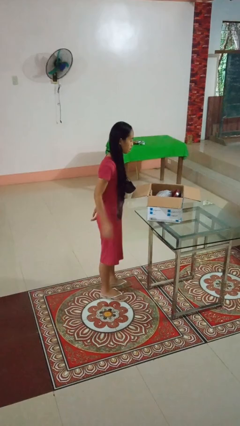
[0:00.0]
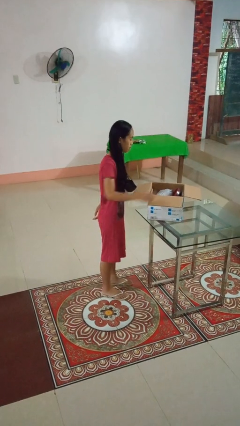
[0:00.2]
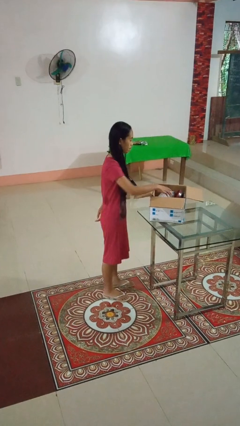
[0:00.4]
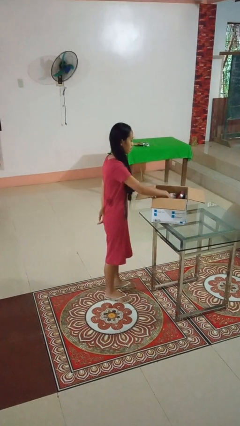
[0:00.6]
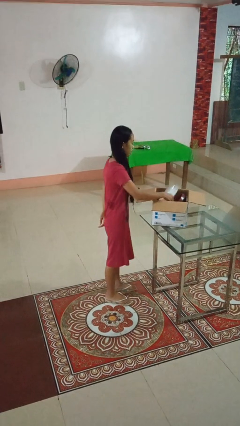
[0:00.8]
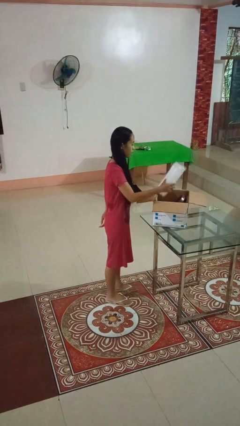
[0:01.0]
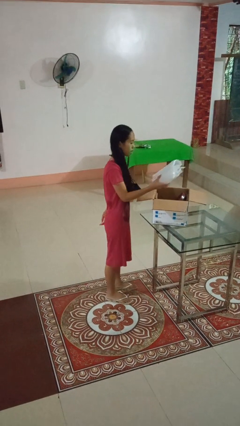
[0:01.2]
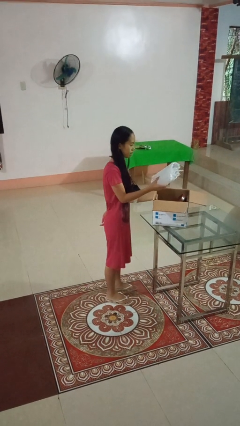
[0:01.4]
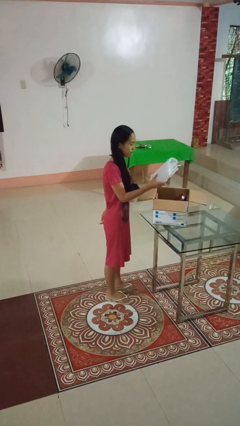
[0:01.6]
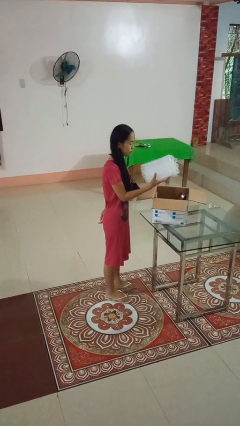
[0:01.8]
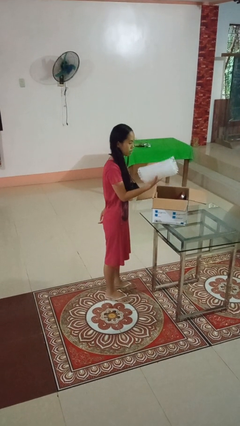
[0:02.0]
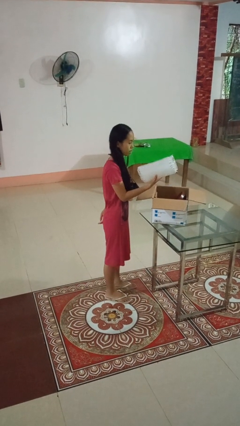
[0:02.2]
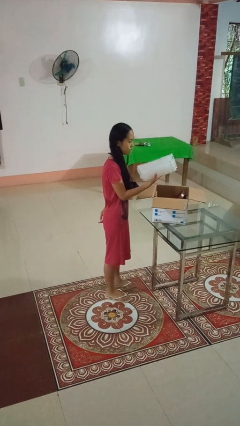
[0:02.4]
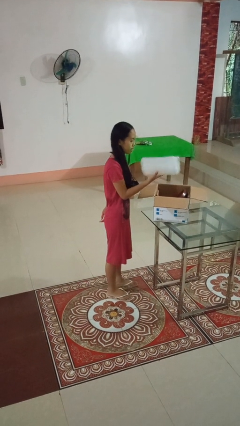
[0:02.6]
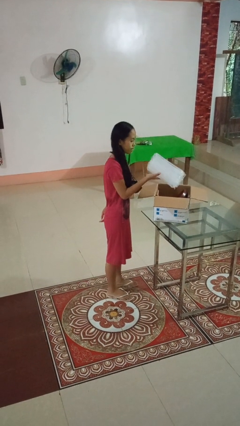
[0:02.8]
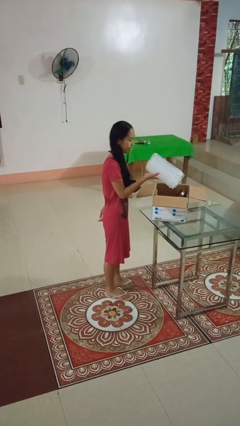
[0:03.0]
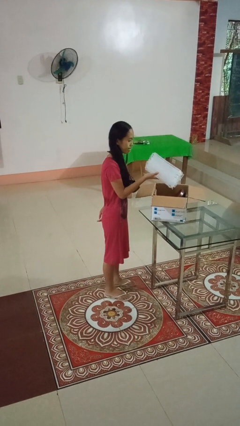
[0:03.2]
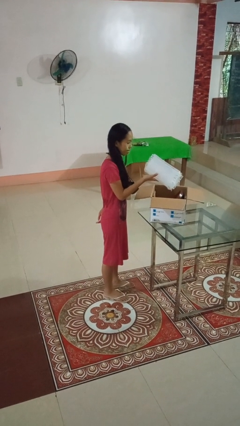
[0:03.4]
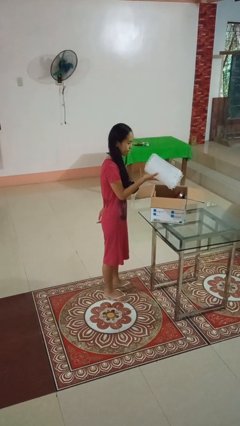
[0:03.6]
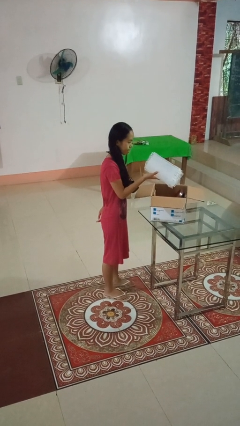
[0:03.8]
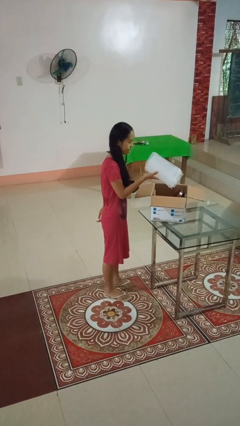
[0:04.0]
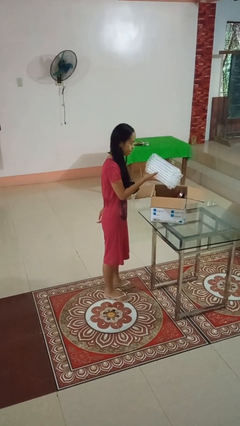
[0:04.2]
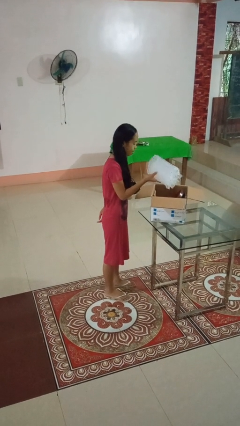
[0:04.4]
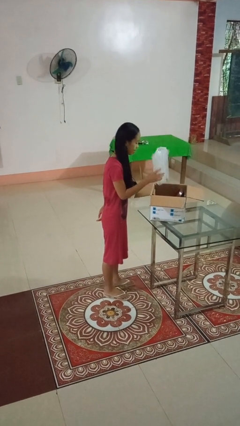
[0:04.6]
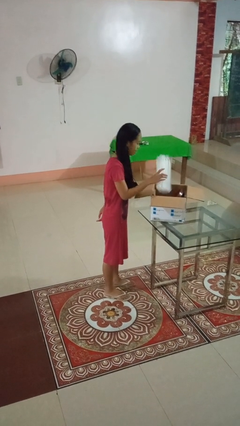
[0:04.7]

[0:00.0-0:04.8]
person takes object from box

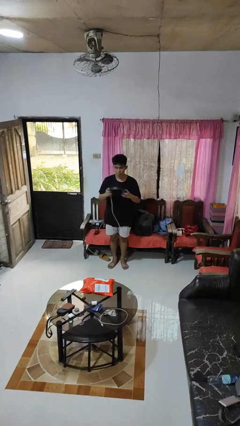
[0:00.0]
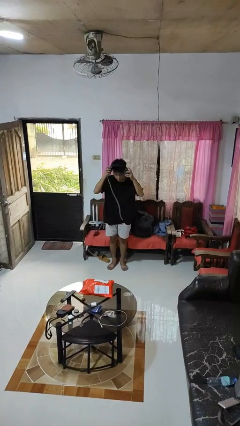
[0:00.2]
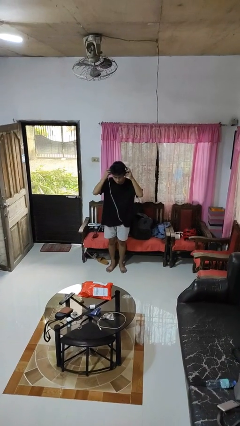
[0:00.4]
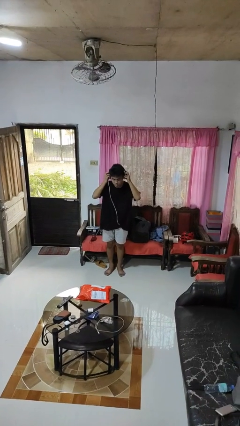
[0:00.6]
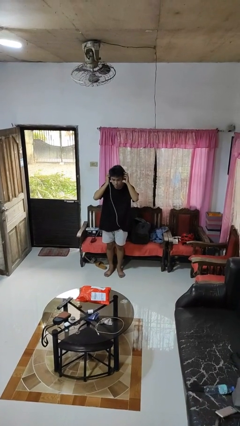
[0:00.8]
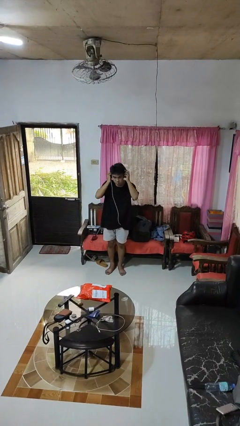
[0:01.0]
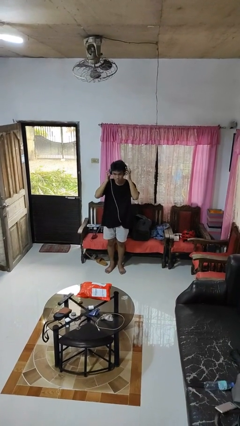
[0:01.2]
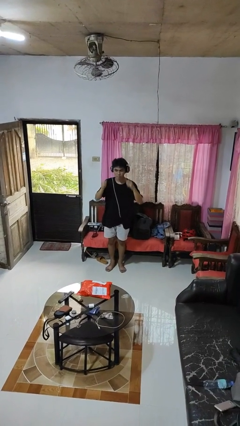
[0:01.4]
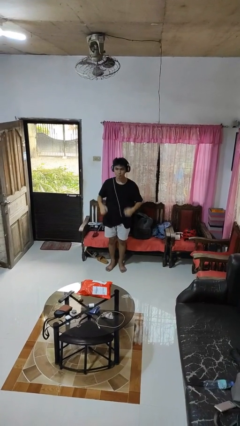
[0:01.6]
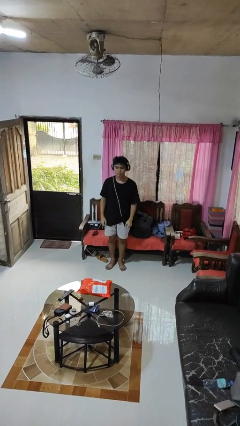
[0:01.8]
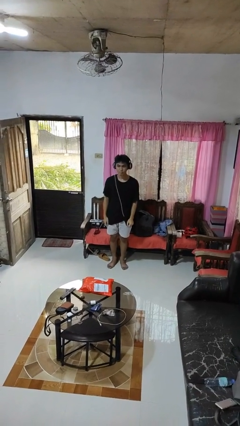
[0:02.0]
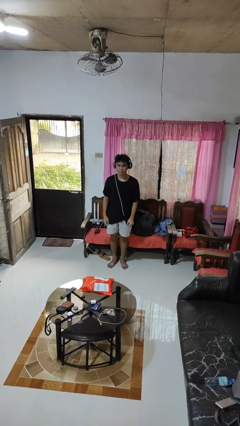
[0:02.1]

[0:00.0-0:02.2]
person puts on headphones

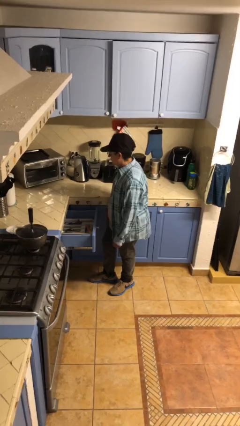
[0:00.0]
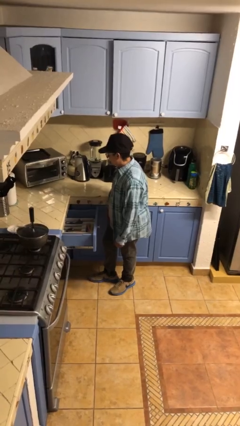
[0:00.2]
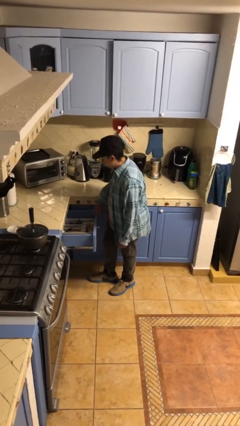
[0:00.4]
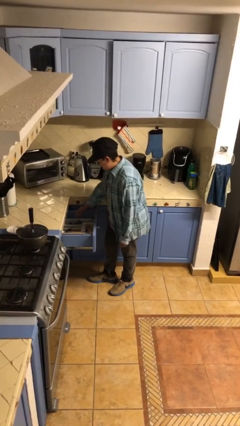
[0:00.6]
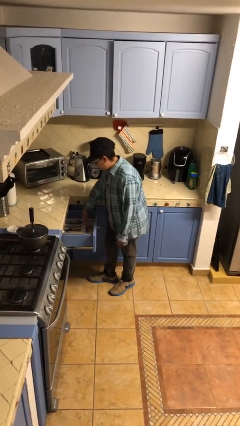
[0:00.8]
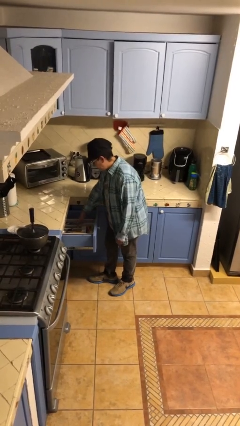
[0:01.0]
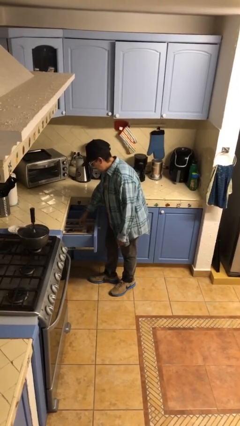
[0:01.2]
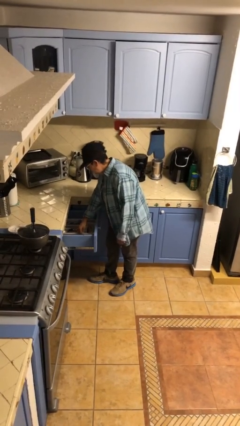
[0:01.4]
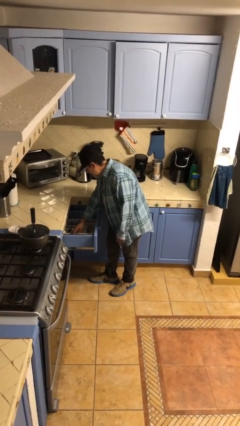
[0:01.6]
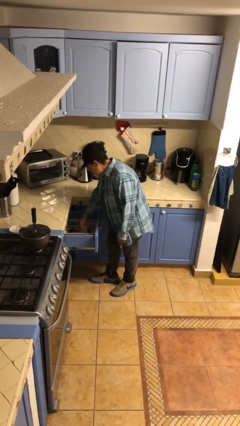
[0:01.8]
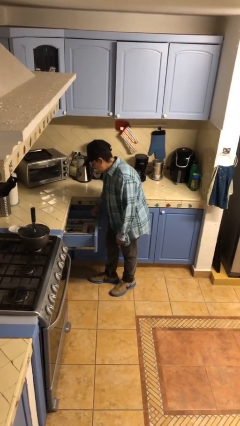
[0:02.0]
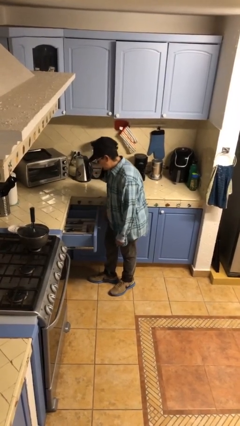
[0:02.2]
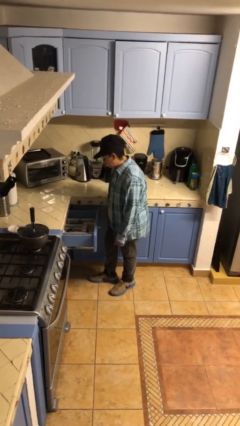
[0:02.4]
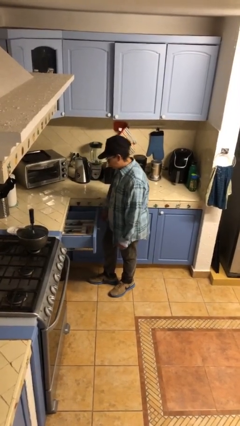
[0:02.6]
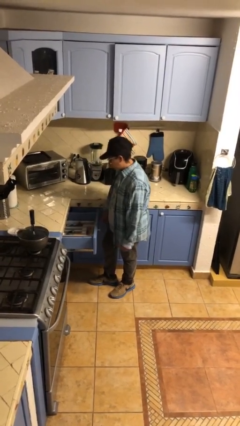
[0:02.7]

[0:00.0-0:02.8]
person searches in kitchen drawer

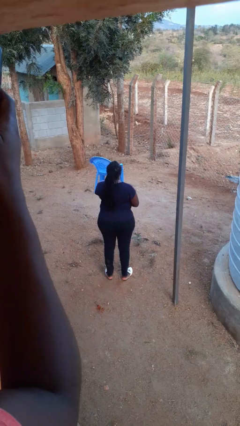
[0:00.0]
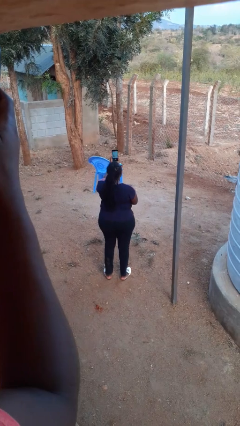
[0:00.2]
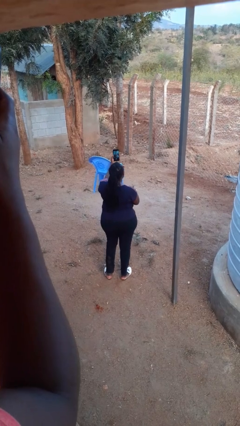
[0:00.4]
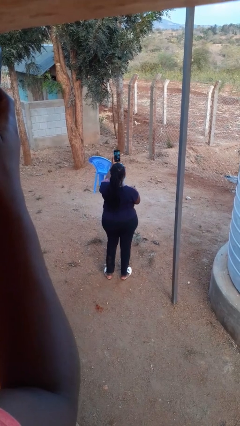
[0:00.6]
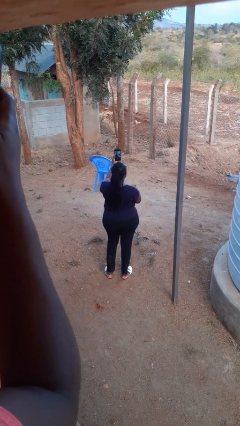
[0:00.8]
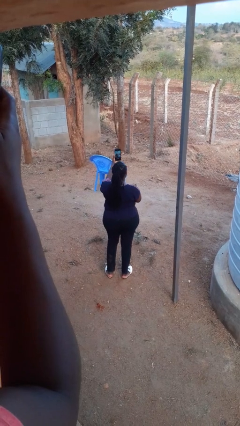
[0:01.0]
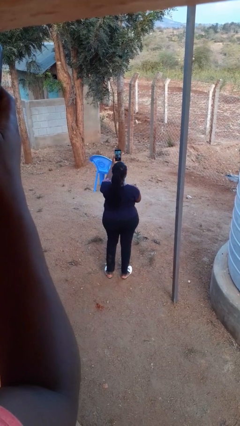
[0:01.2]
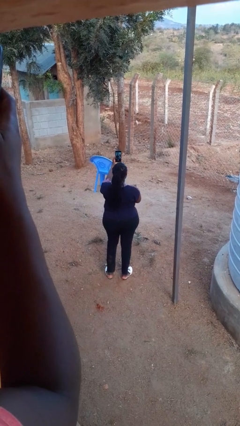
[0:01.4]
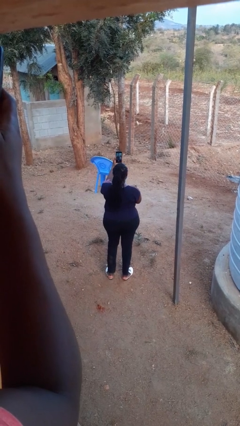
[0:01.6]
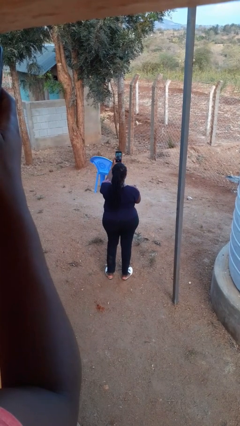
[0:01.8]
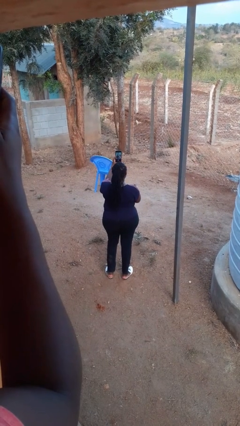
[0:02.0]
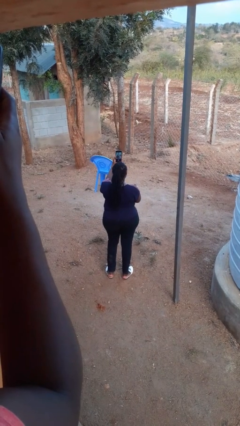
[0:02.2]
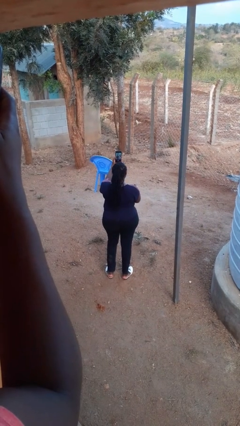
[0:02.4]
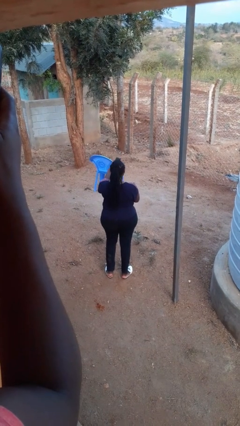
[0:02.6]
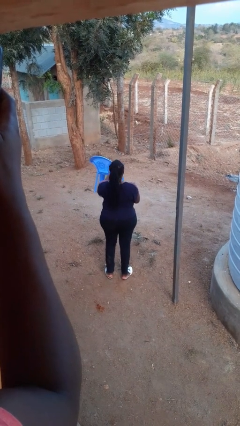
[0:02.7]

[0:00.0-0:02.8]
person takes selfie

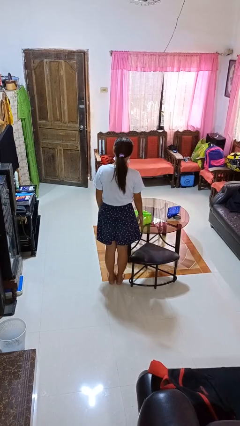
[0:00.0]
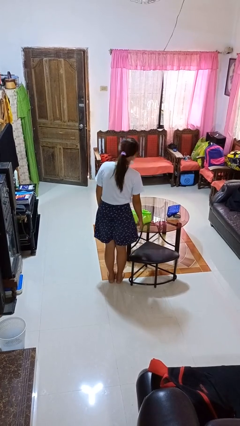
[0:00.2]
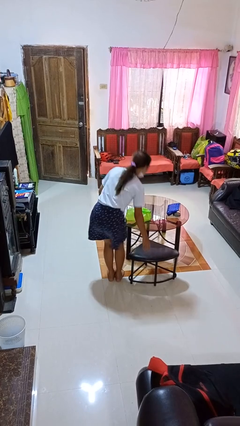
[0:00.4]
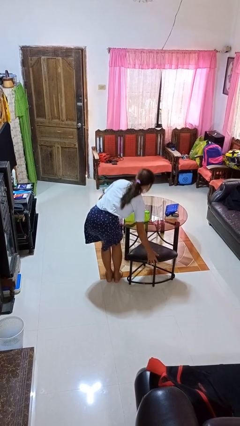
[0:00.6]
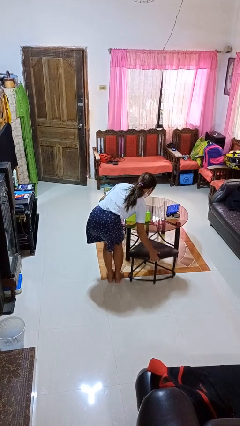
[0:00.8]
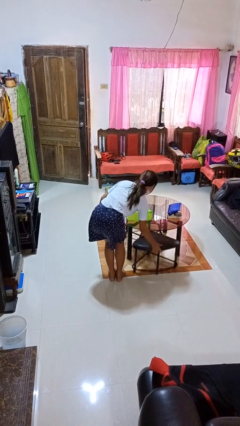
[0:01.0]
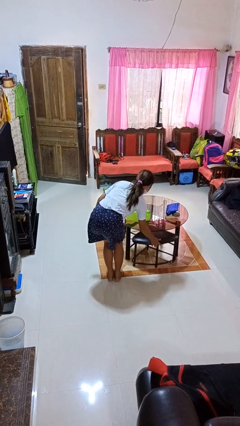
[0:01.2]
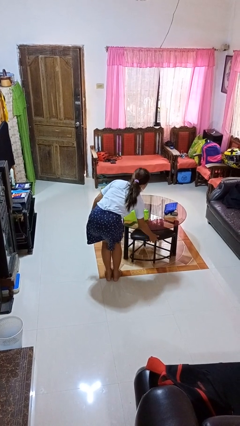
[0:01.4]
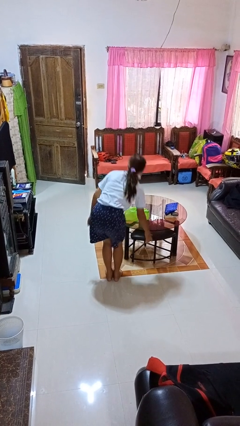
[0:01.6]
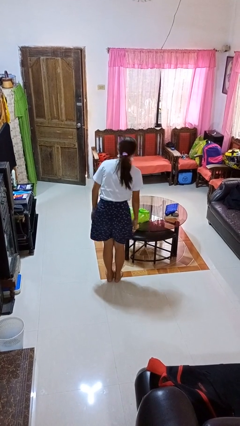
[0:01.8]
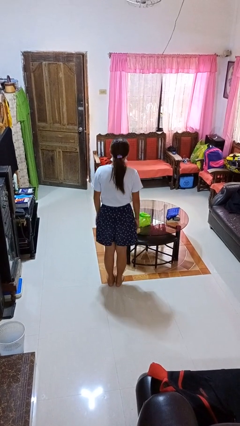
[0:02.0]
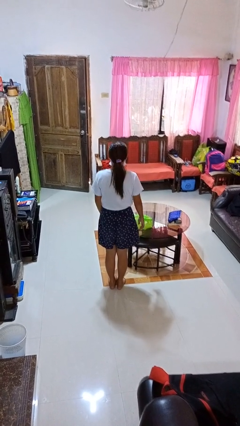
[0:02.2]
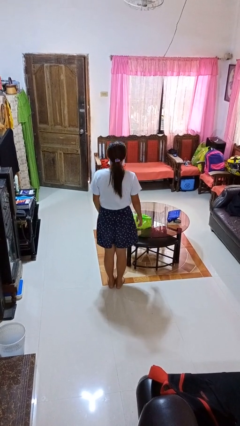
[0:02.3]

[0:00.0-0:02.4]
person pushes in chair

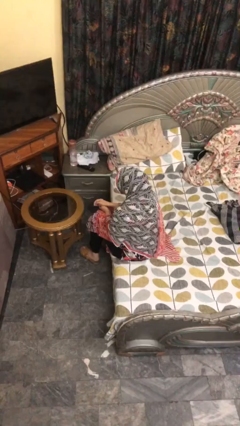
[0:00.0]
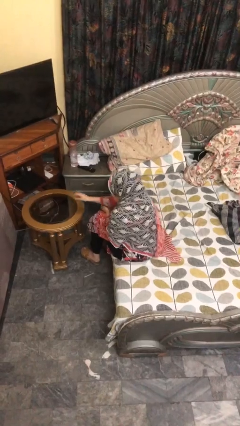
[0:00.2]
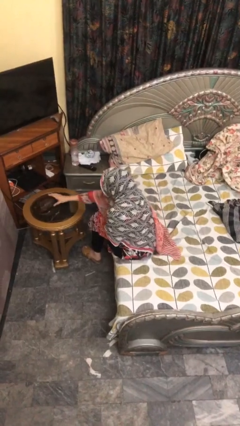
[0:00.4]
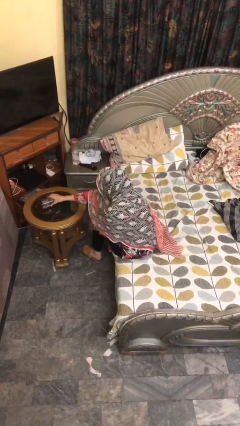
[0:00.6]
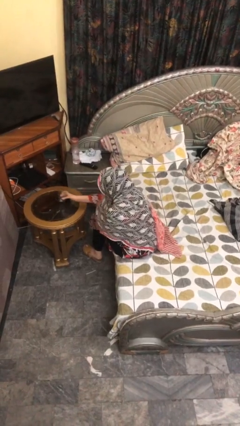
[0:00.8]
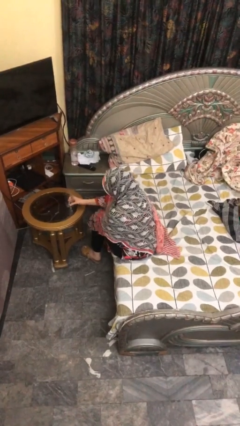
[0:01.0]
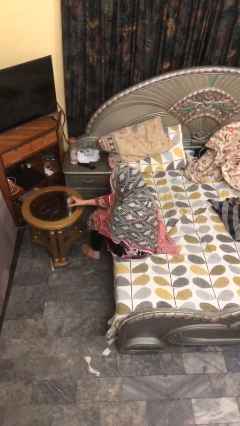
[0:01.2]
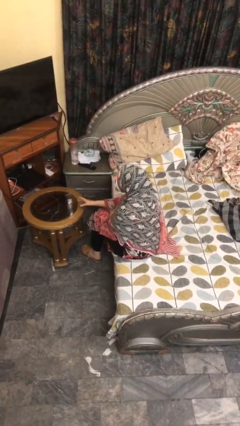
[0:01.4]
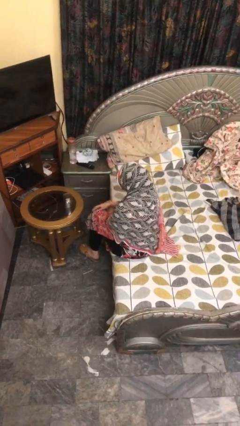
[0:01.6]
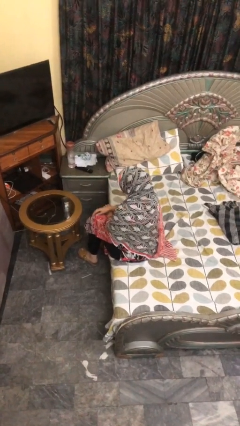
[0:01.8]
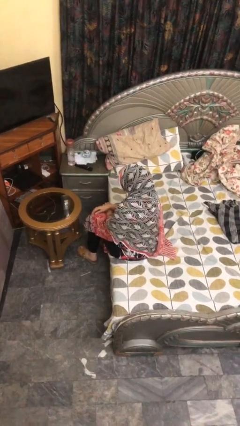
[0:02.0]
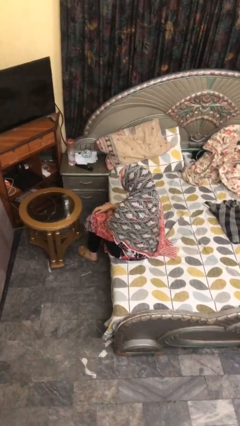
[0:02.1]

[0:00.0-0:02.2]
person sets upright glass
